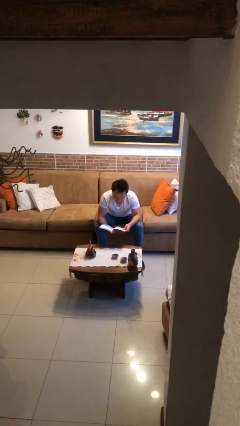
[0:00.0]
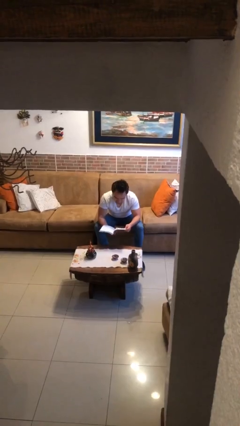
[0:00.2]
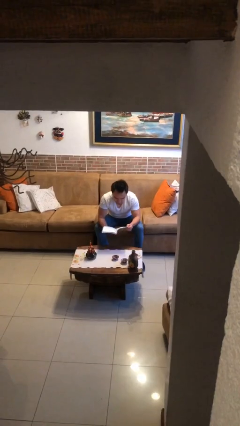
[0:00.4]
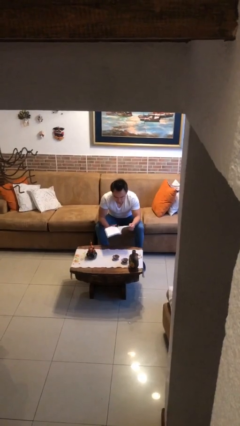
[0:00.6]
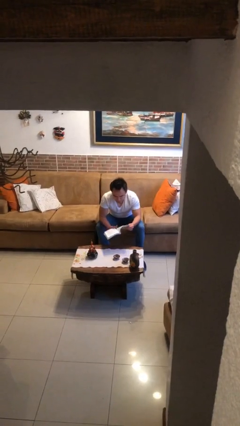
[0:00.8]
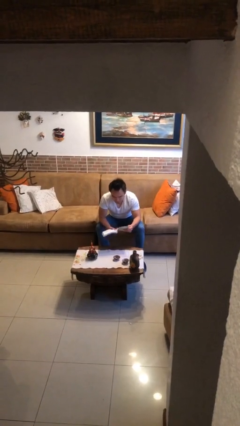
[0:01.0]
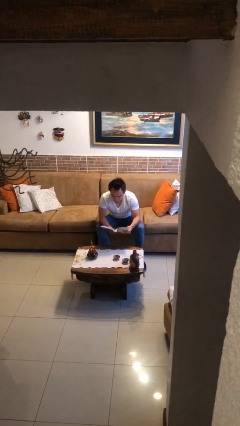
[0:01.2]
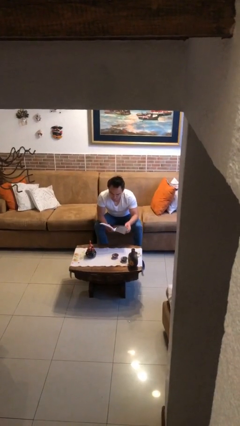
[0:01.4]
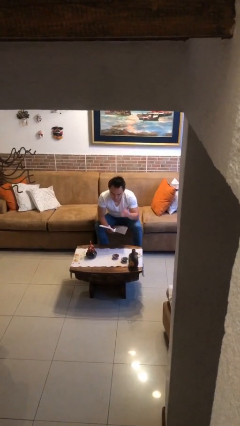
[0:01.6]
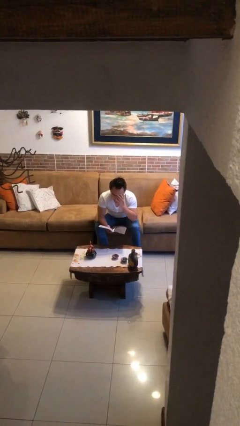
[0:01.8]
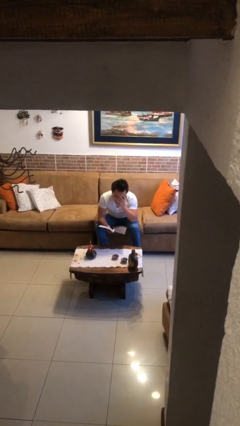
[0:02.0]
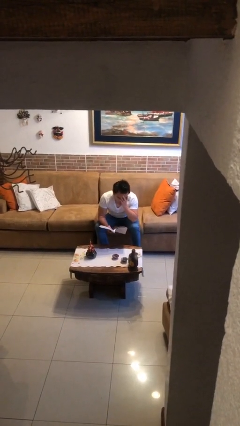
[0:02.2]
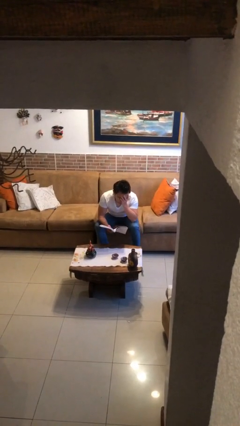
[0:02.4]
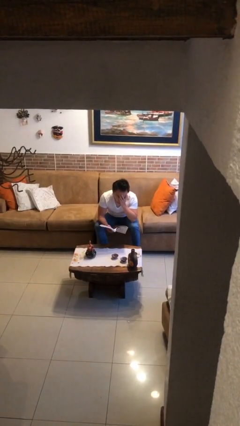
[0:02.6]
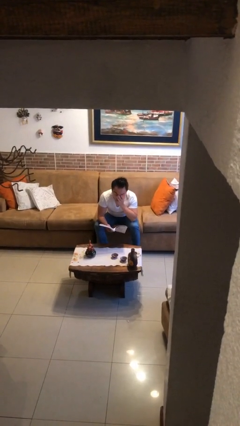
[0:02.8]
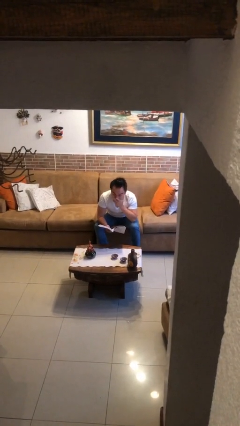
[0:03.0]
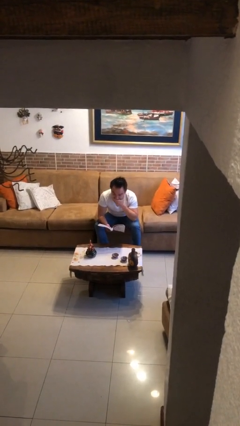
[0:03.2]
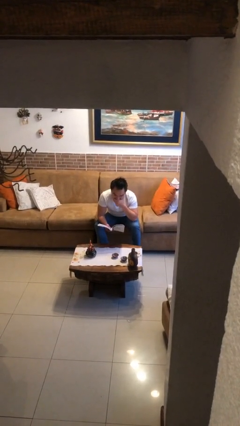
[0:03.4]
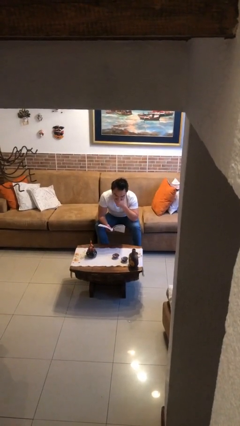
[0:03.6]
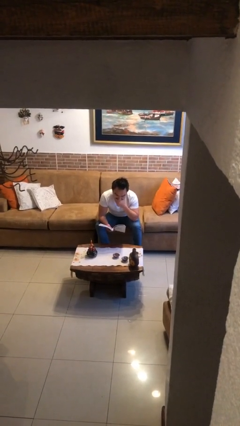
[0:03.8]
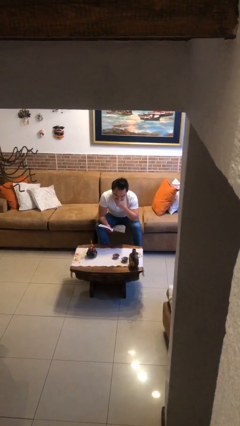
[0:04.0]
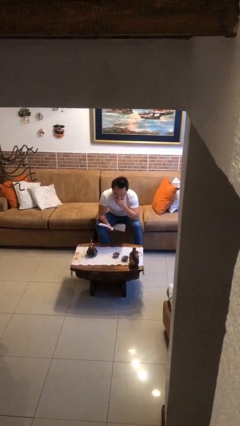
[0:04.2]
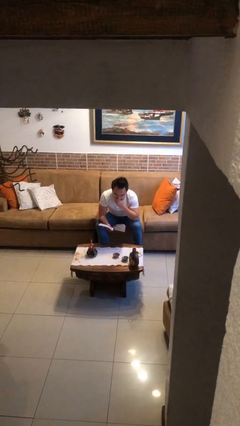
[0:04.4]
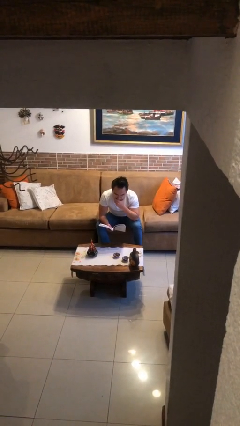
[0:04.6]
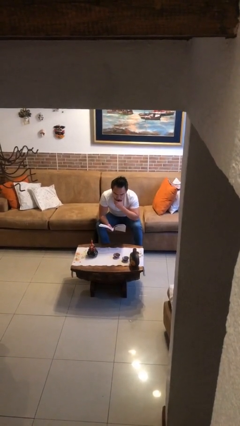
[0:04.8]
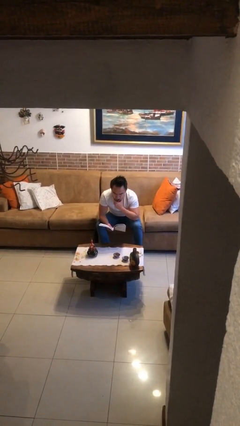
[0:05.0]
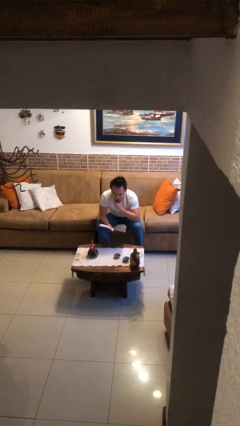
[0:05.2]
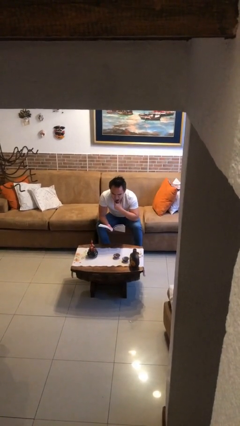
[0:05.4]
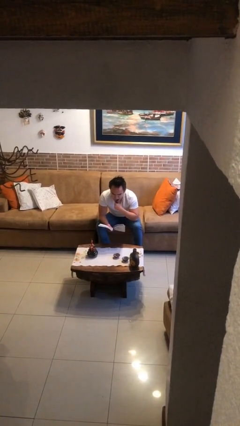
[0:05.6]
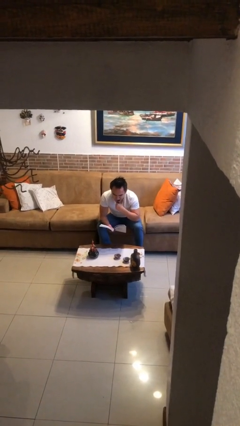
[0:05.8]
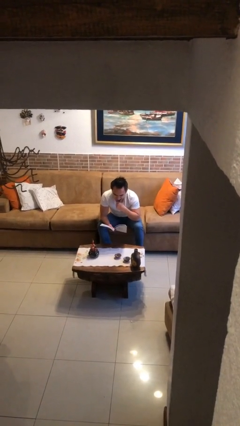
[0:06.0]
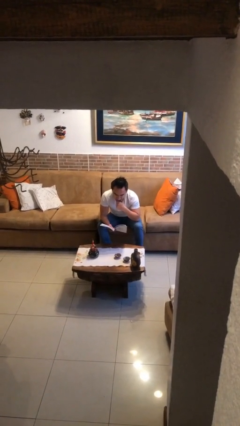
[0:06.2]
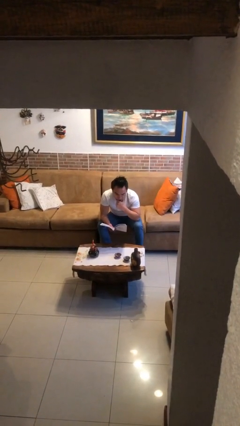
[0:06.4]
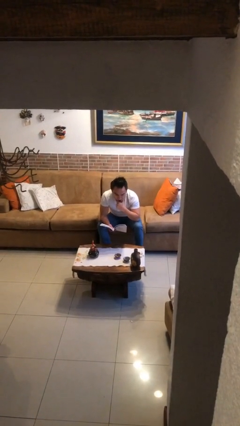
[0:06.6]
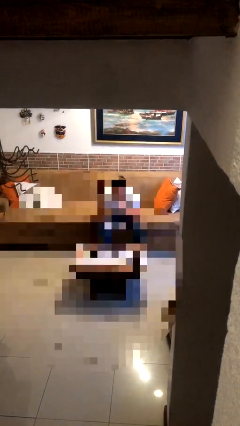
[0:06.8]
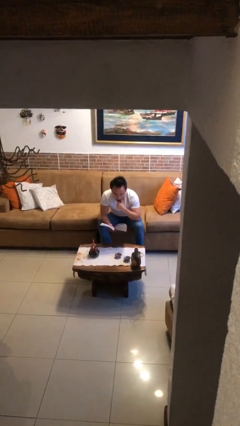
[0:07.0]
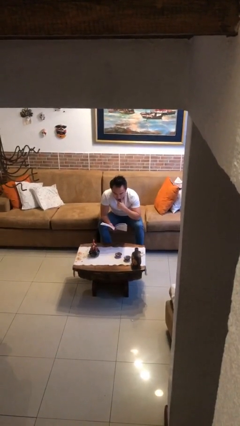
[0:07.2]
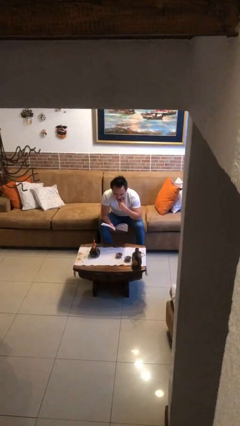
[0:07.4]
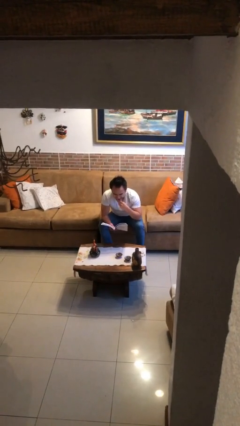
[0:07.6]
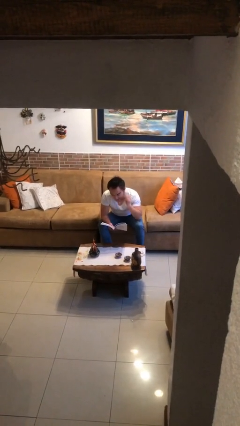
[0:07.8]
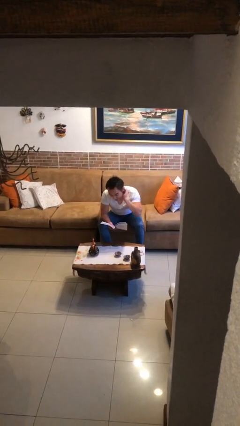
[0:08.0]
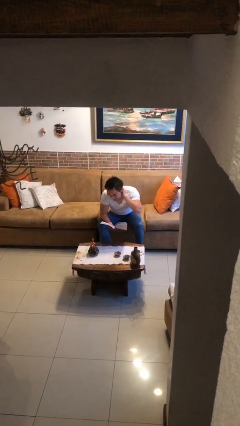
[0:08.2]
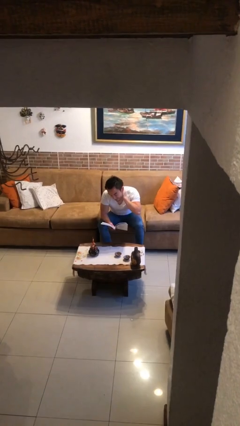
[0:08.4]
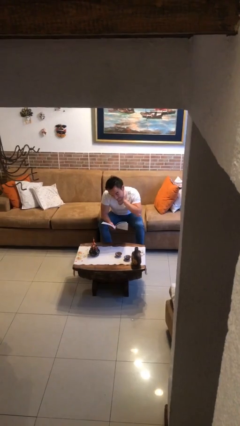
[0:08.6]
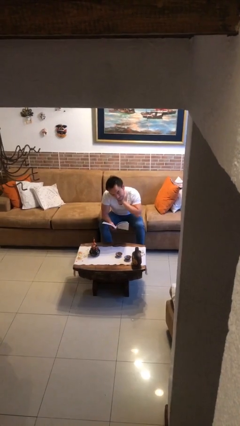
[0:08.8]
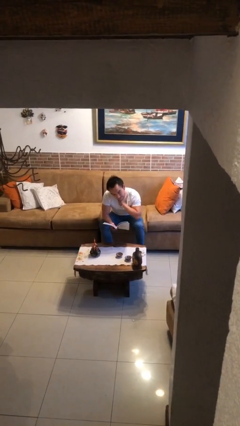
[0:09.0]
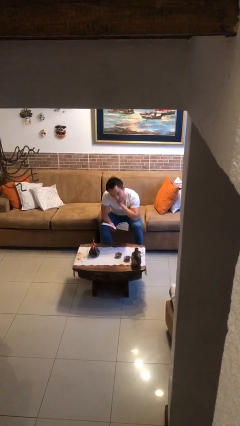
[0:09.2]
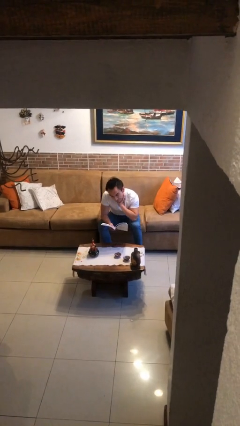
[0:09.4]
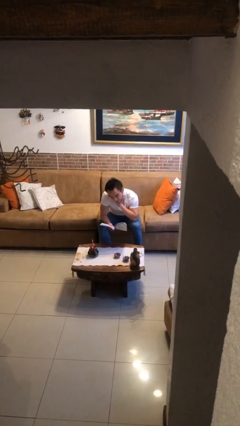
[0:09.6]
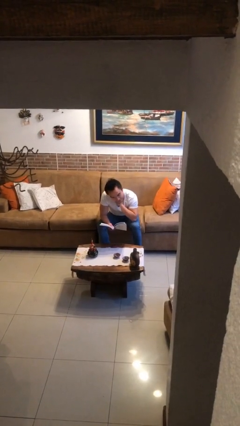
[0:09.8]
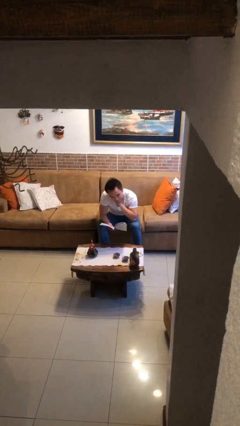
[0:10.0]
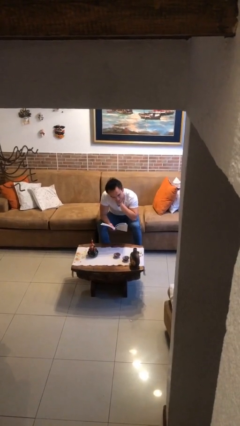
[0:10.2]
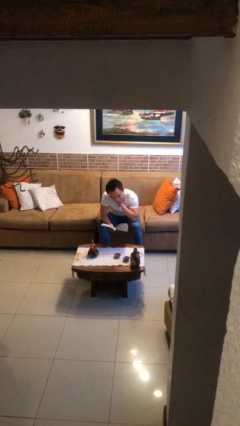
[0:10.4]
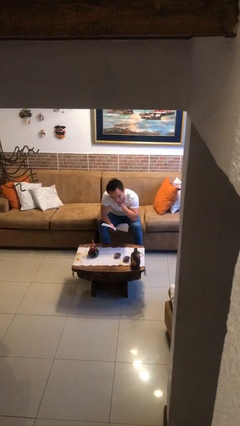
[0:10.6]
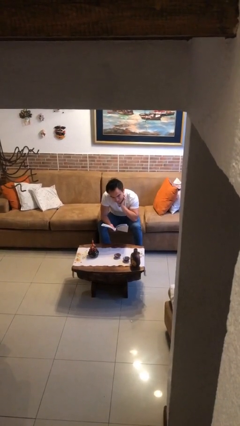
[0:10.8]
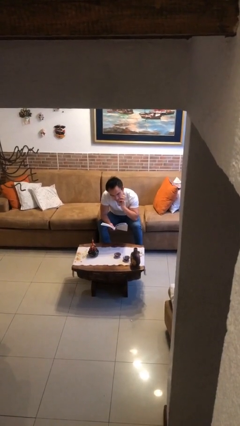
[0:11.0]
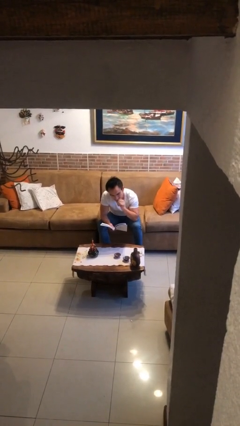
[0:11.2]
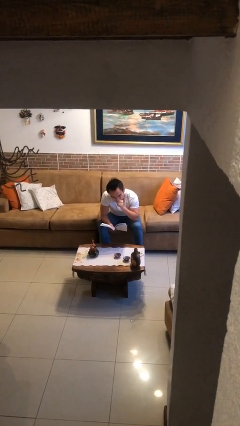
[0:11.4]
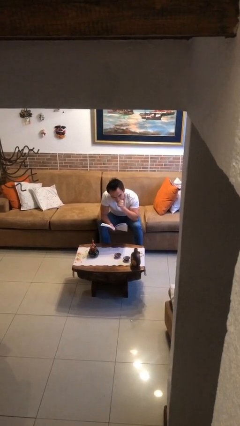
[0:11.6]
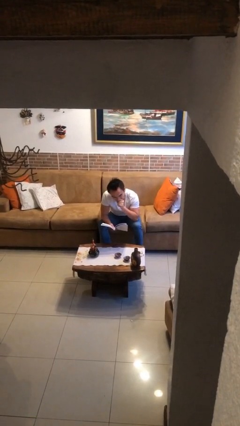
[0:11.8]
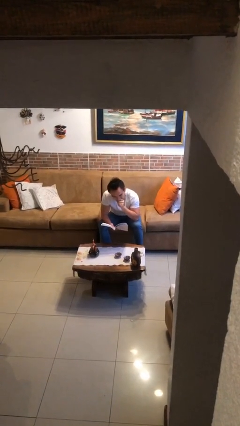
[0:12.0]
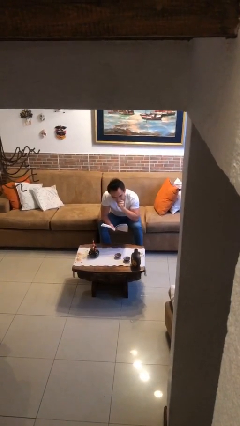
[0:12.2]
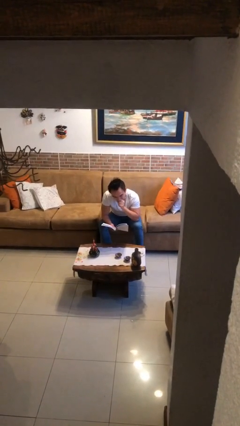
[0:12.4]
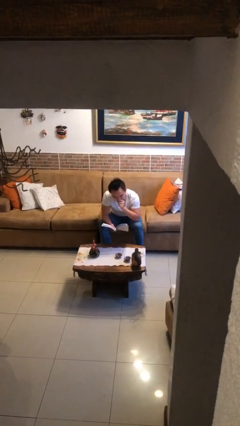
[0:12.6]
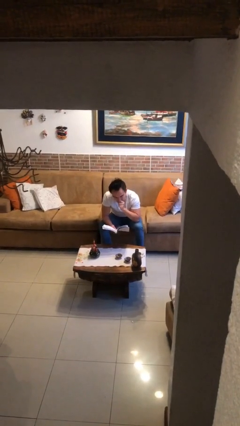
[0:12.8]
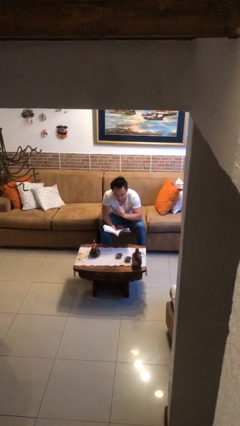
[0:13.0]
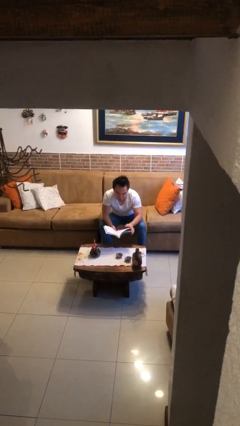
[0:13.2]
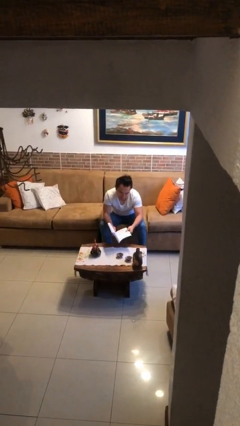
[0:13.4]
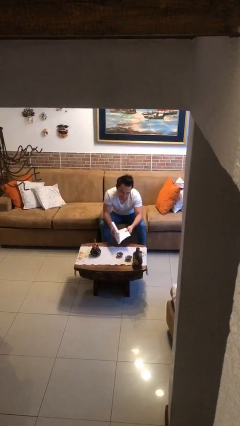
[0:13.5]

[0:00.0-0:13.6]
person reads document

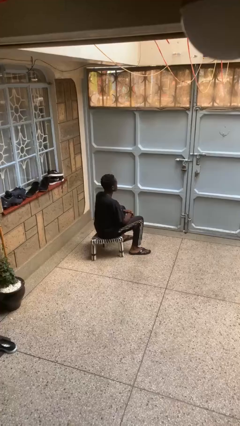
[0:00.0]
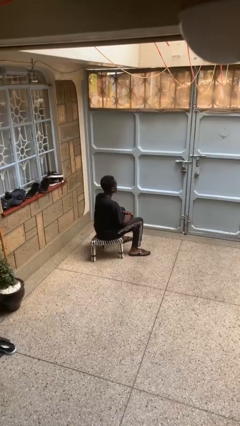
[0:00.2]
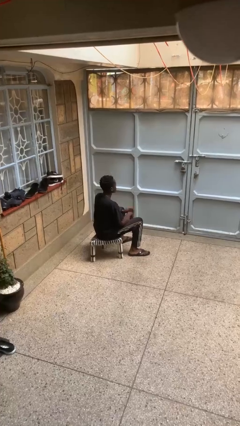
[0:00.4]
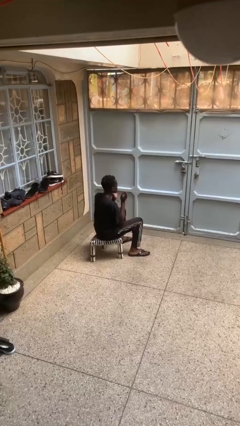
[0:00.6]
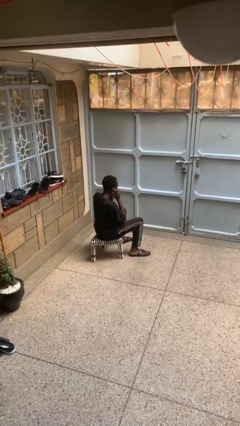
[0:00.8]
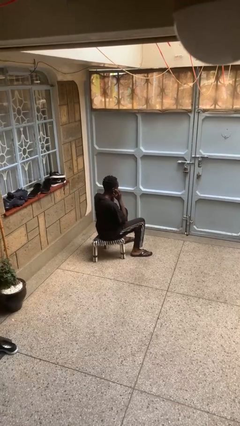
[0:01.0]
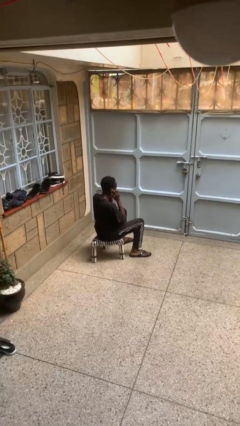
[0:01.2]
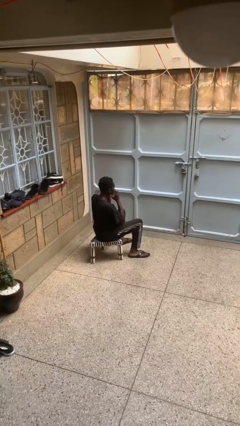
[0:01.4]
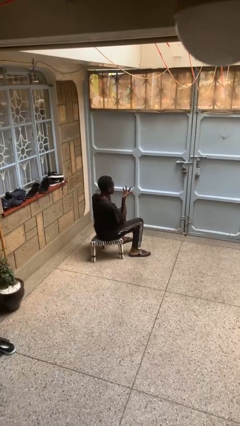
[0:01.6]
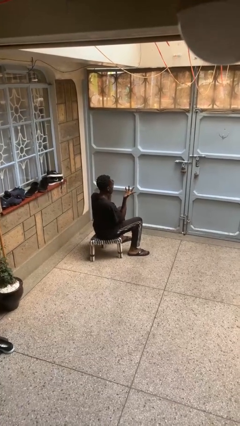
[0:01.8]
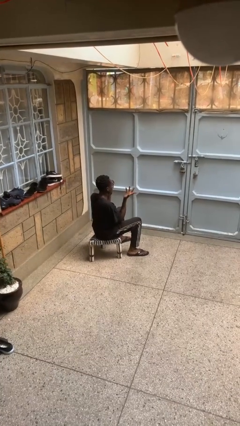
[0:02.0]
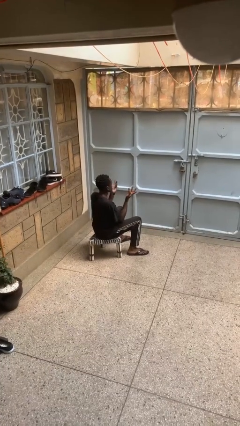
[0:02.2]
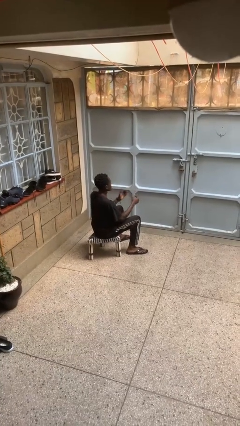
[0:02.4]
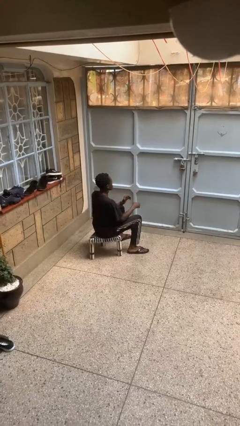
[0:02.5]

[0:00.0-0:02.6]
person puts fingers in ear

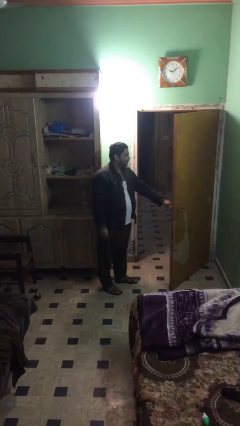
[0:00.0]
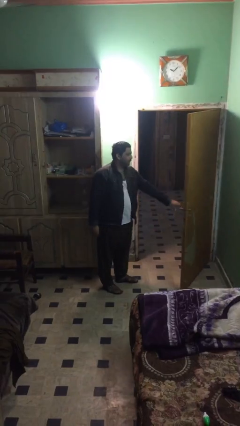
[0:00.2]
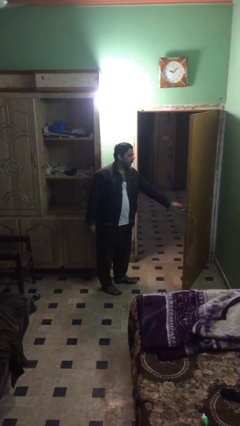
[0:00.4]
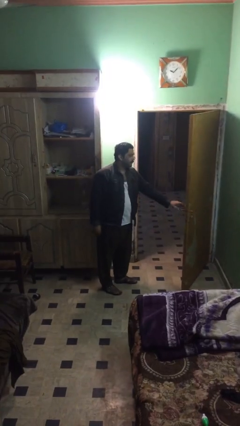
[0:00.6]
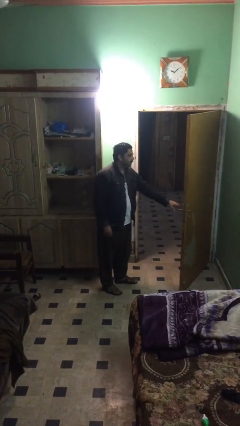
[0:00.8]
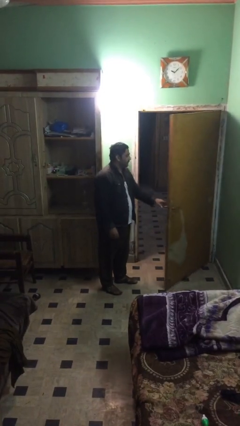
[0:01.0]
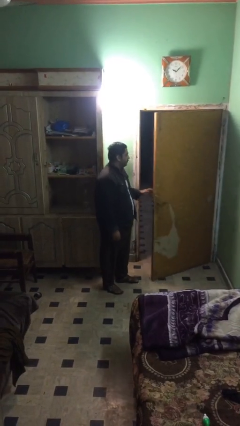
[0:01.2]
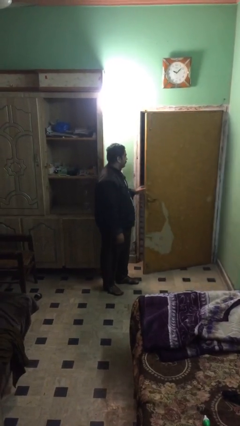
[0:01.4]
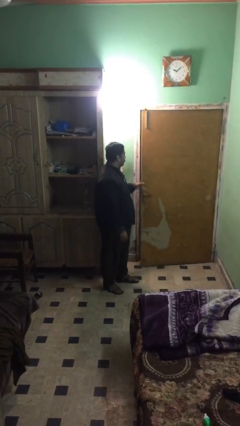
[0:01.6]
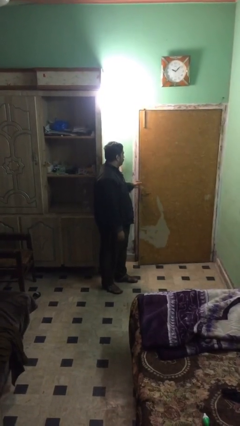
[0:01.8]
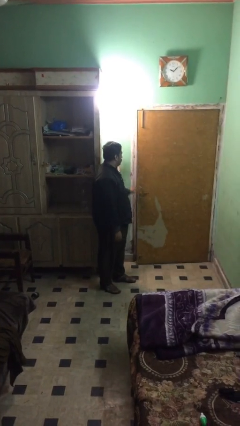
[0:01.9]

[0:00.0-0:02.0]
person closes facility door
